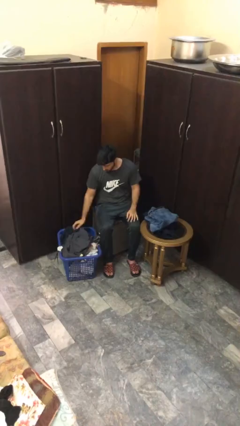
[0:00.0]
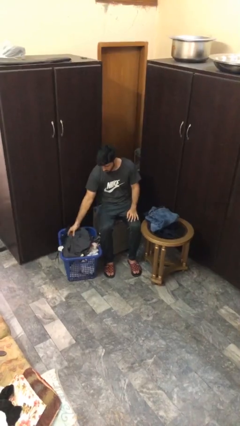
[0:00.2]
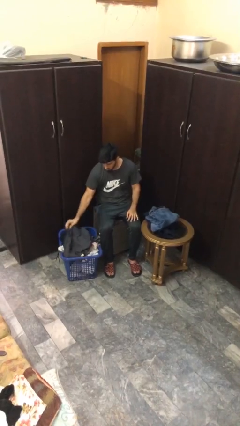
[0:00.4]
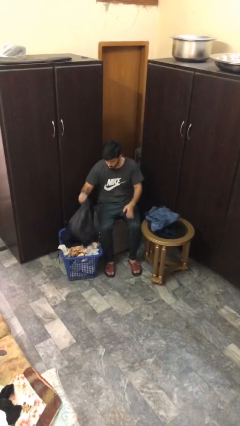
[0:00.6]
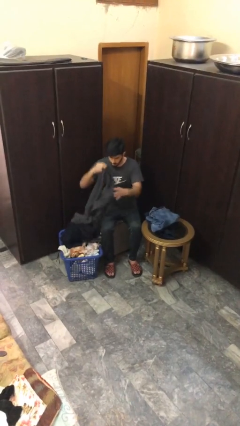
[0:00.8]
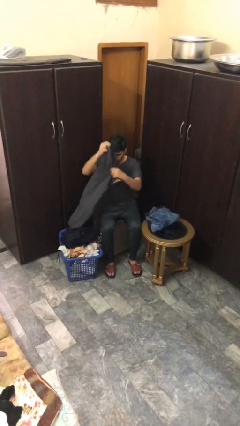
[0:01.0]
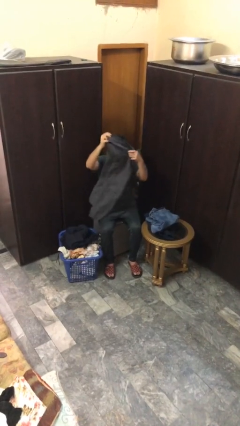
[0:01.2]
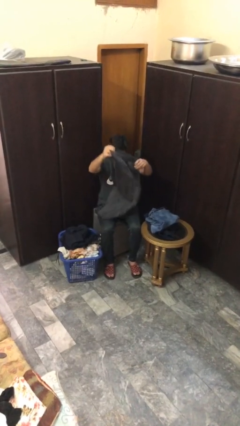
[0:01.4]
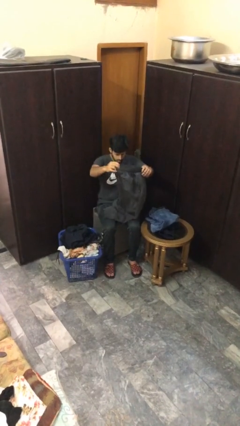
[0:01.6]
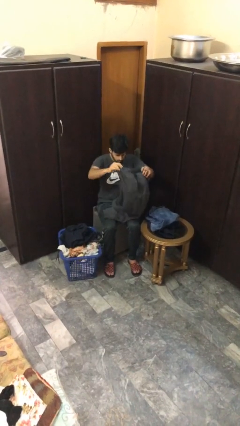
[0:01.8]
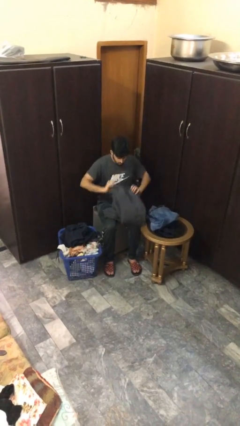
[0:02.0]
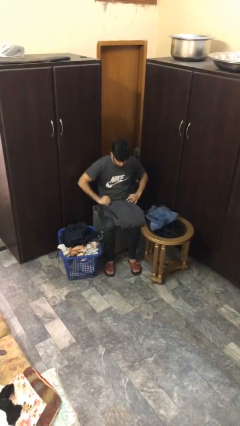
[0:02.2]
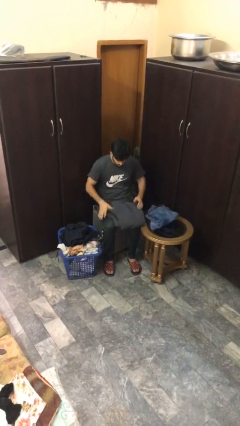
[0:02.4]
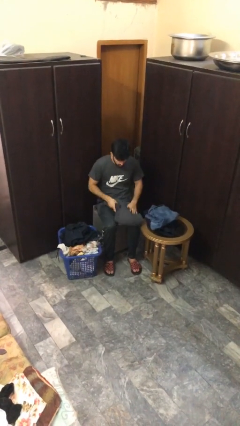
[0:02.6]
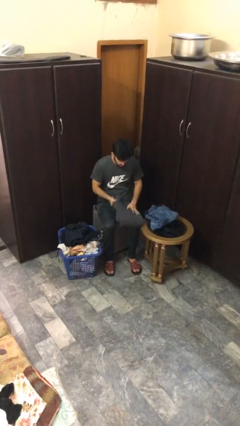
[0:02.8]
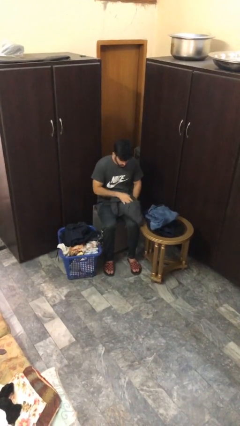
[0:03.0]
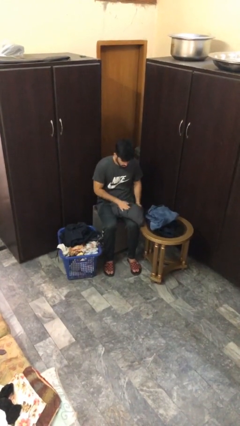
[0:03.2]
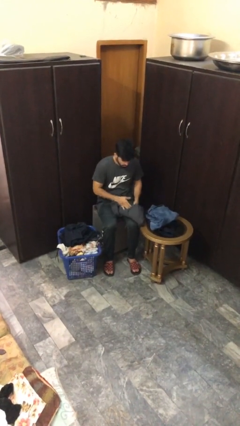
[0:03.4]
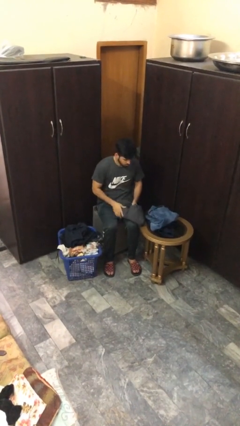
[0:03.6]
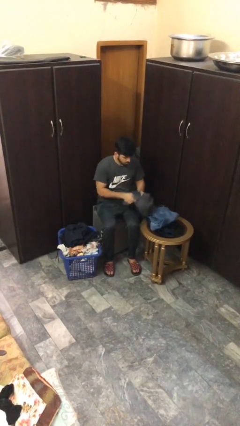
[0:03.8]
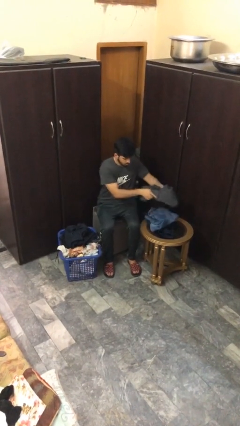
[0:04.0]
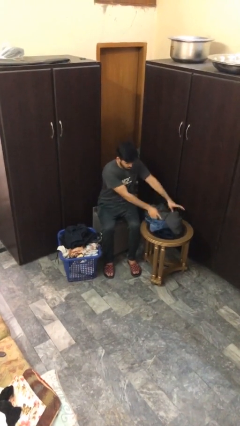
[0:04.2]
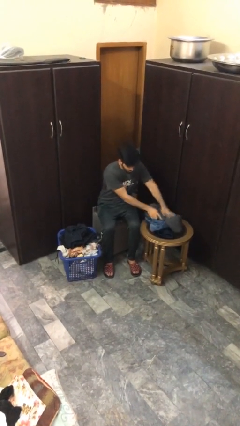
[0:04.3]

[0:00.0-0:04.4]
person folds pants

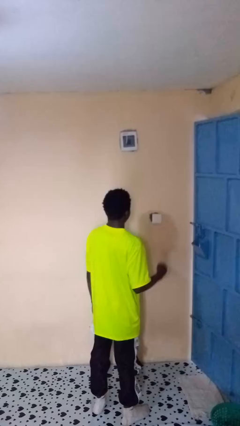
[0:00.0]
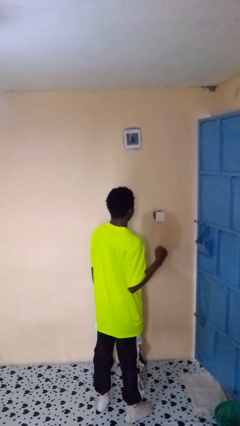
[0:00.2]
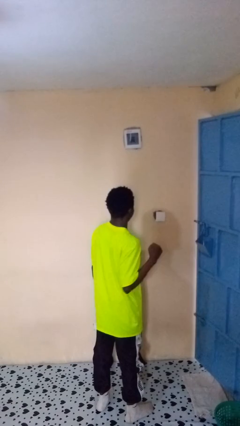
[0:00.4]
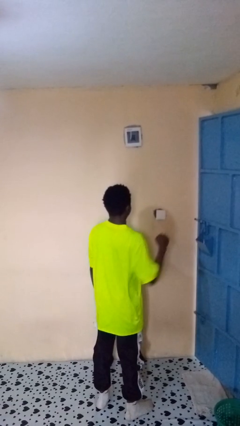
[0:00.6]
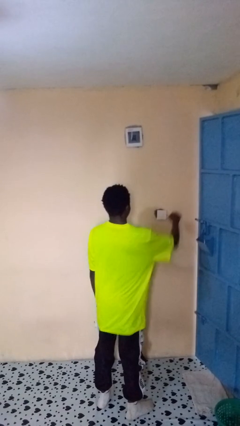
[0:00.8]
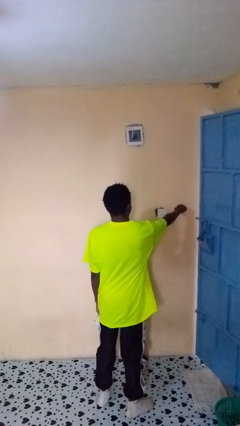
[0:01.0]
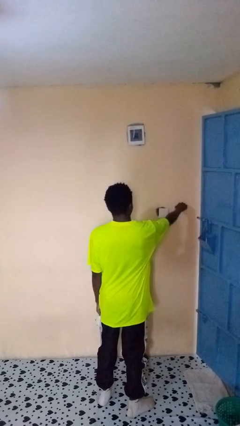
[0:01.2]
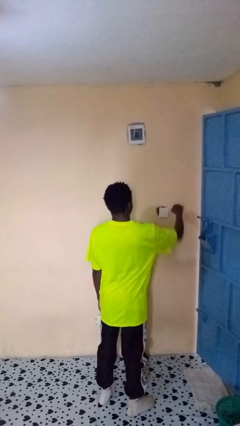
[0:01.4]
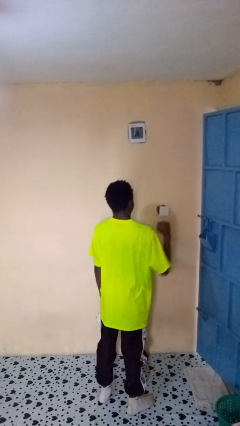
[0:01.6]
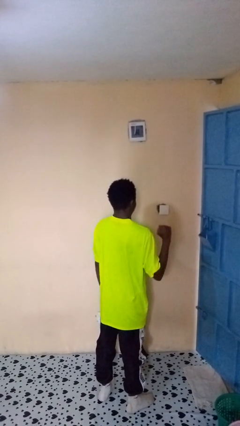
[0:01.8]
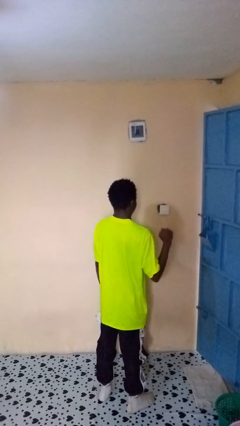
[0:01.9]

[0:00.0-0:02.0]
person punches

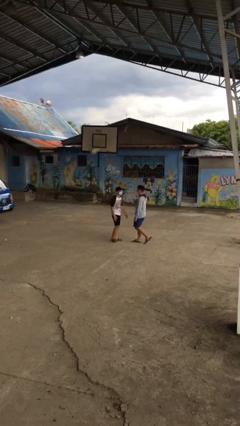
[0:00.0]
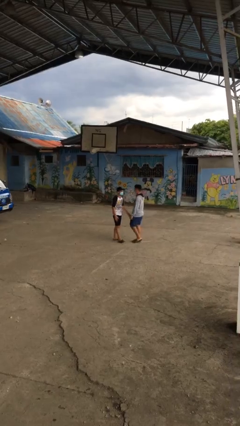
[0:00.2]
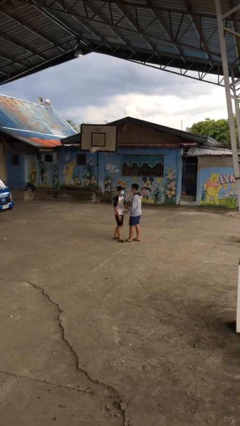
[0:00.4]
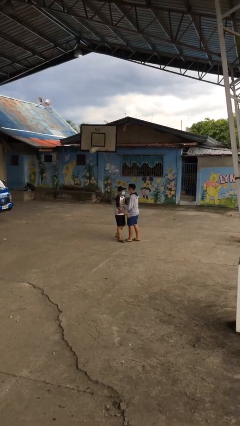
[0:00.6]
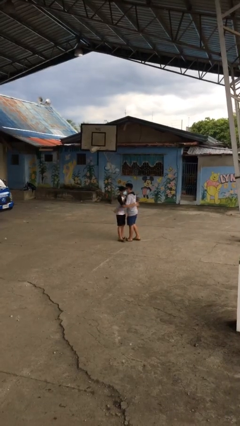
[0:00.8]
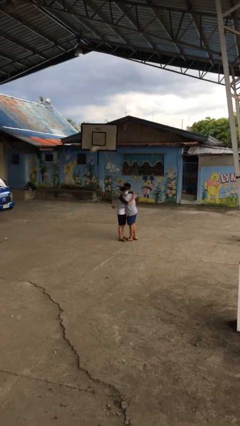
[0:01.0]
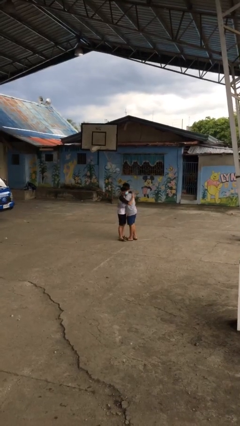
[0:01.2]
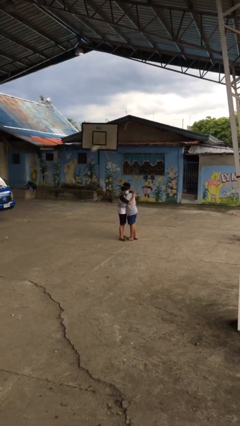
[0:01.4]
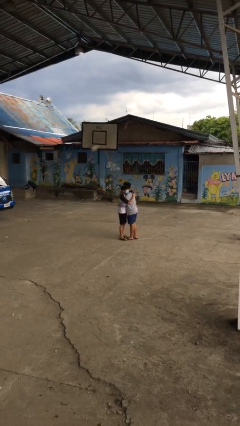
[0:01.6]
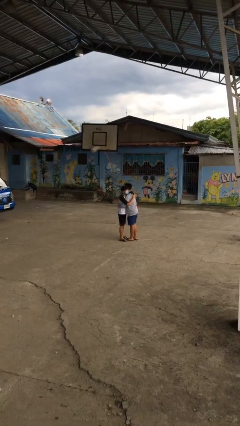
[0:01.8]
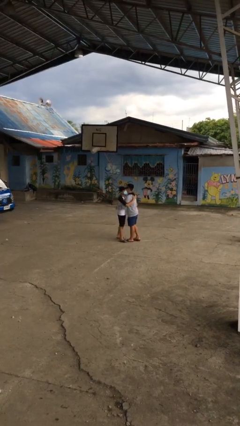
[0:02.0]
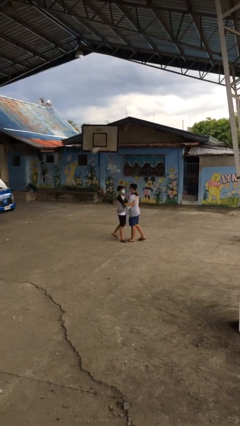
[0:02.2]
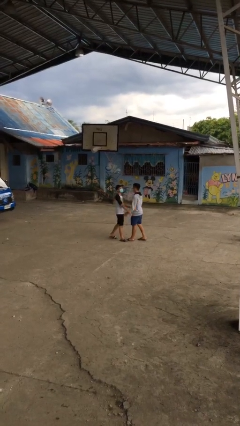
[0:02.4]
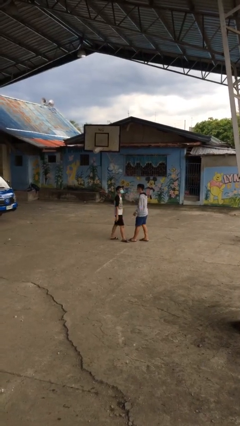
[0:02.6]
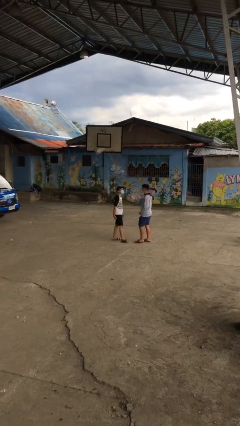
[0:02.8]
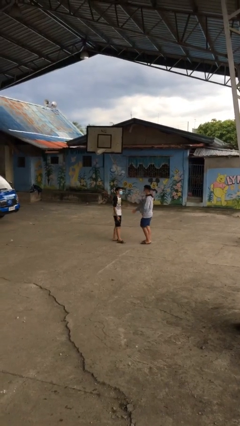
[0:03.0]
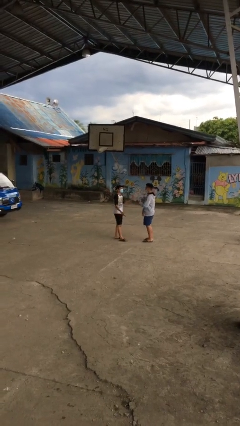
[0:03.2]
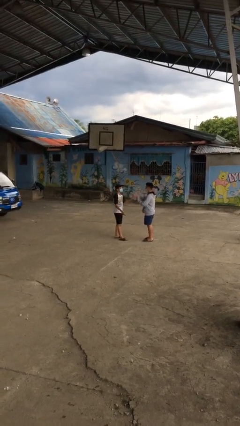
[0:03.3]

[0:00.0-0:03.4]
person embraces person

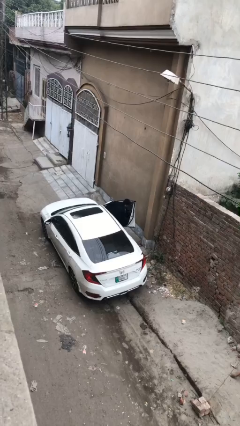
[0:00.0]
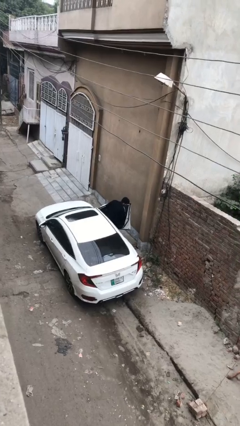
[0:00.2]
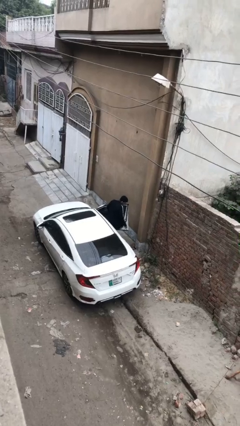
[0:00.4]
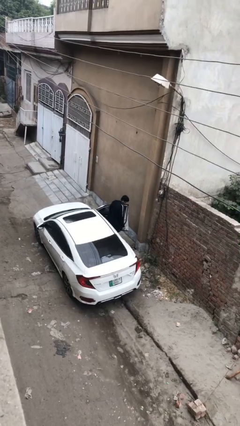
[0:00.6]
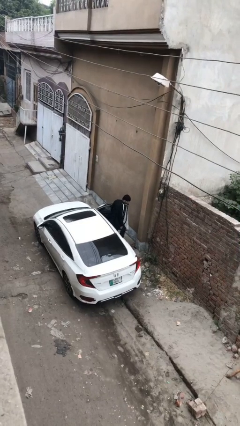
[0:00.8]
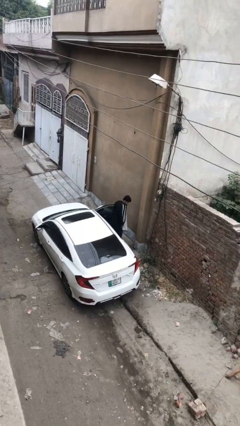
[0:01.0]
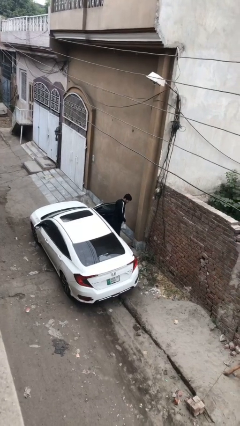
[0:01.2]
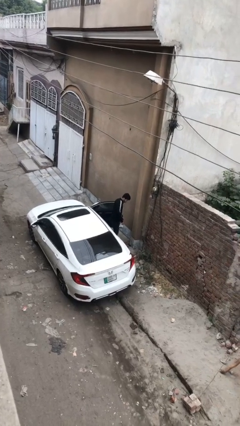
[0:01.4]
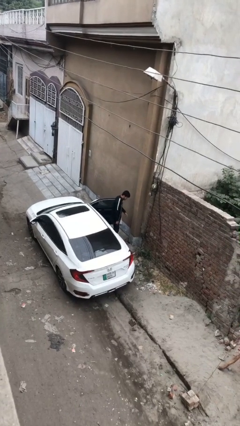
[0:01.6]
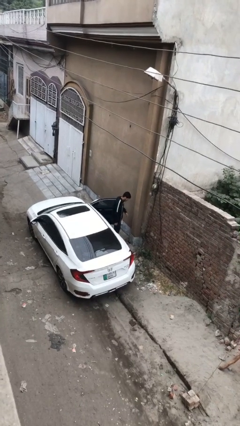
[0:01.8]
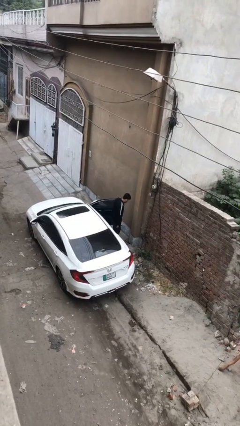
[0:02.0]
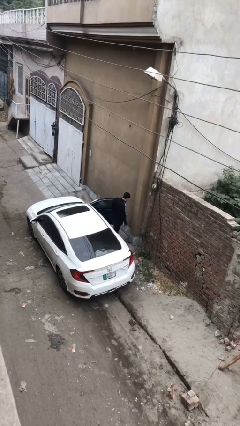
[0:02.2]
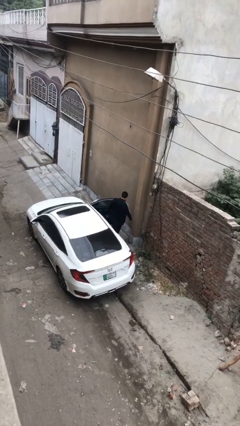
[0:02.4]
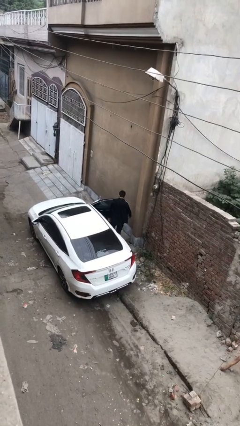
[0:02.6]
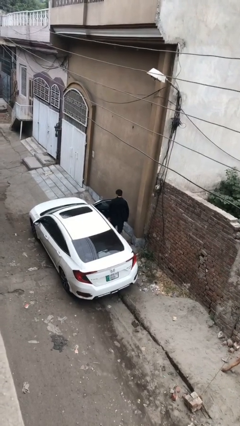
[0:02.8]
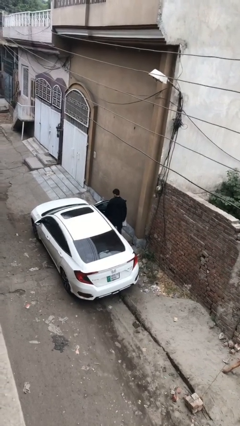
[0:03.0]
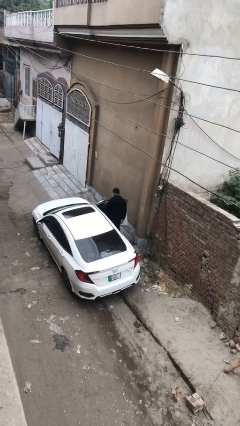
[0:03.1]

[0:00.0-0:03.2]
person exits car

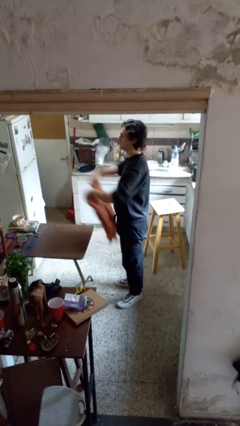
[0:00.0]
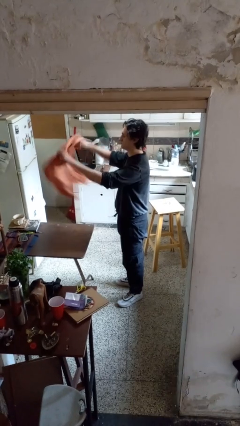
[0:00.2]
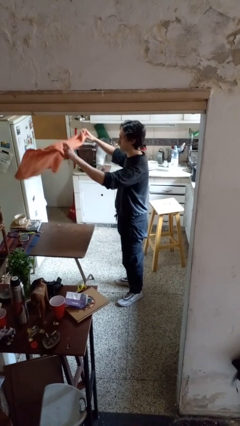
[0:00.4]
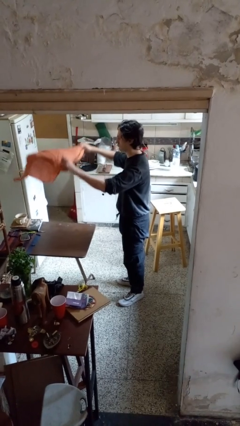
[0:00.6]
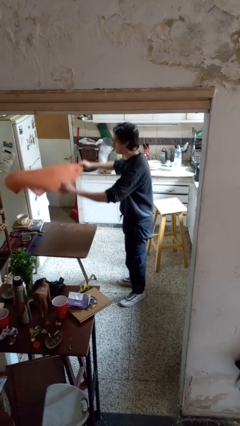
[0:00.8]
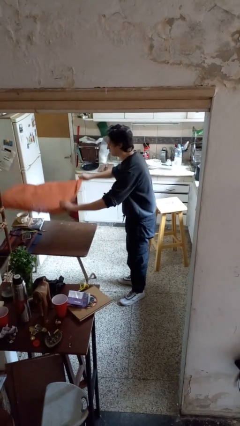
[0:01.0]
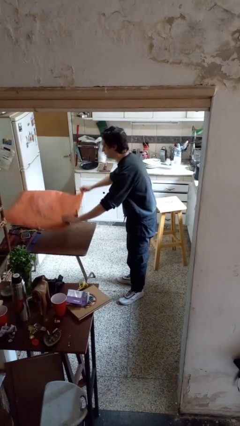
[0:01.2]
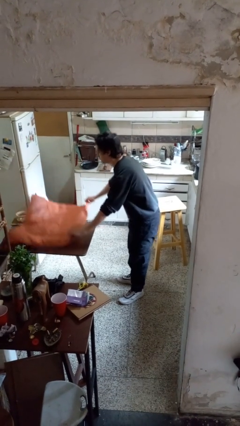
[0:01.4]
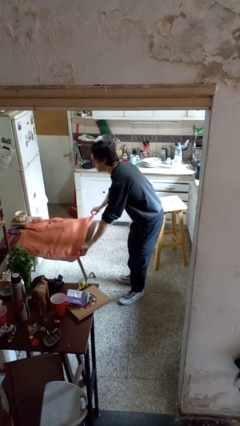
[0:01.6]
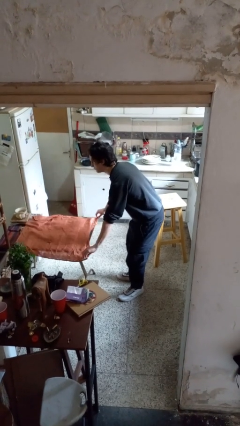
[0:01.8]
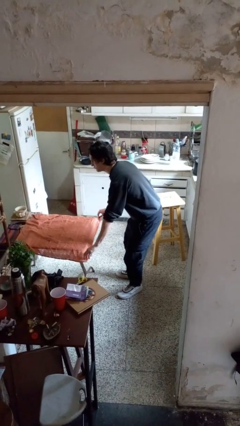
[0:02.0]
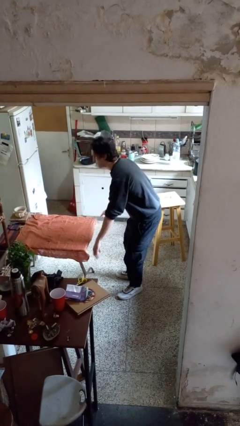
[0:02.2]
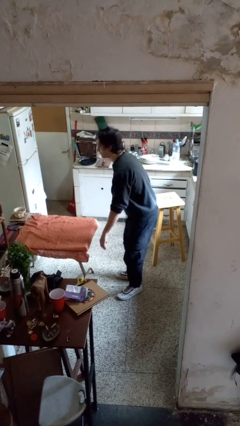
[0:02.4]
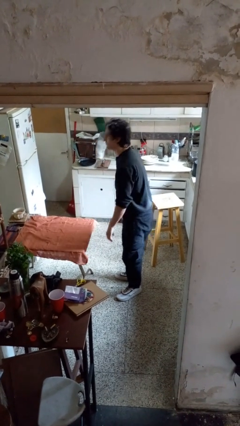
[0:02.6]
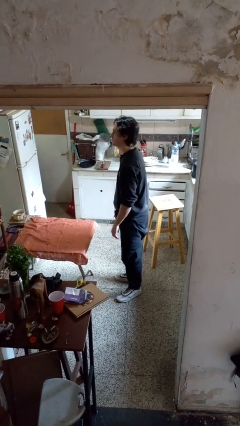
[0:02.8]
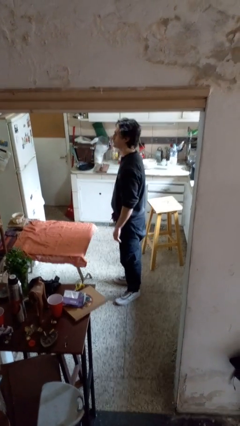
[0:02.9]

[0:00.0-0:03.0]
person spreads tablecloth

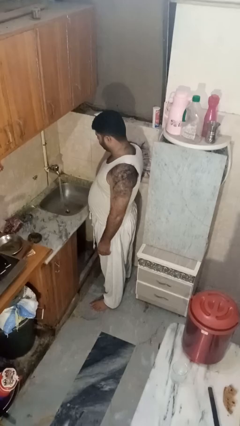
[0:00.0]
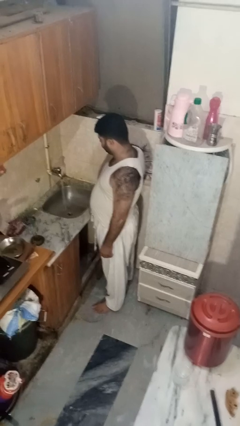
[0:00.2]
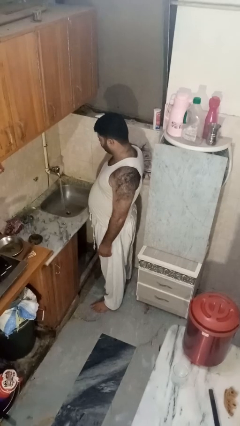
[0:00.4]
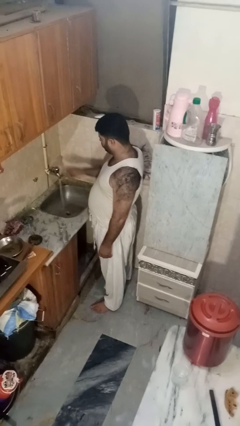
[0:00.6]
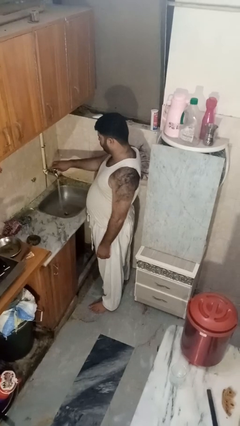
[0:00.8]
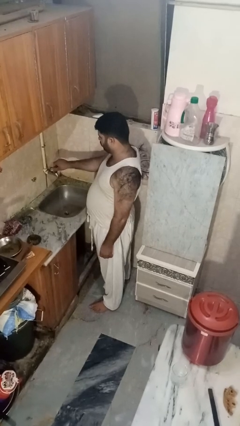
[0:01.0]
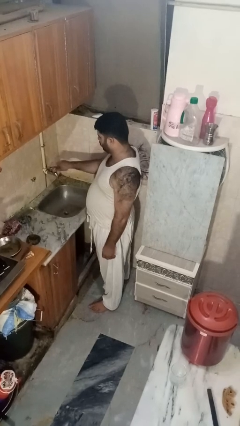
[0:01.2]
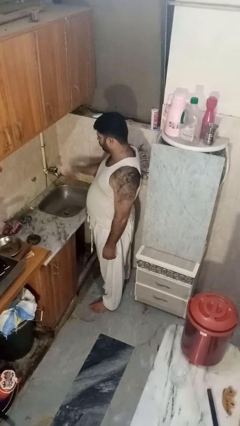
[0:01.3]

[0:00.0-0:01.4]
person turns off faucet
